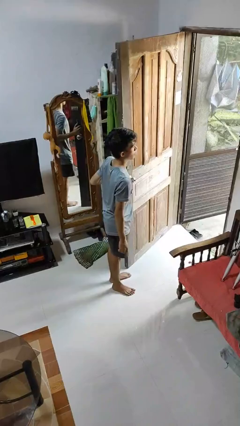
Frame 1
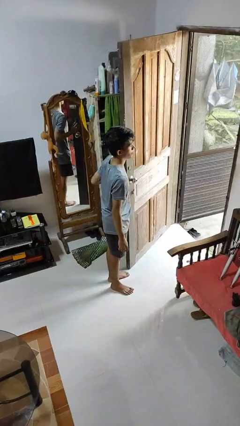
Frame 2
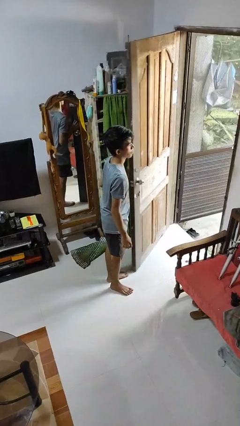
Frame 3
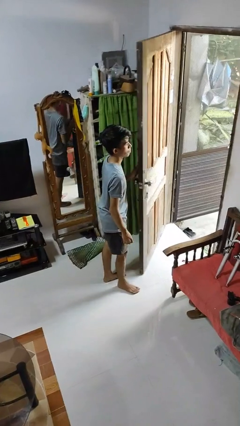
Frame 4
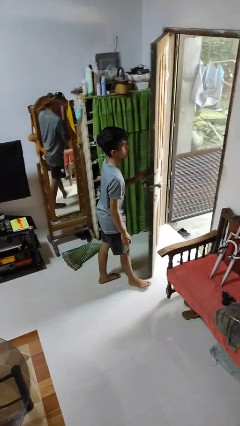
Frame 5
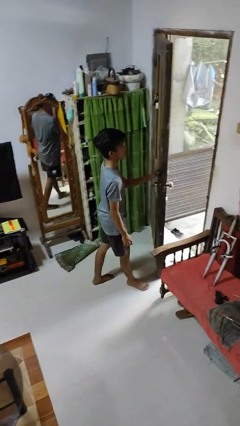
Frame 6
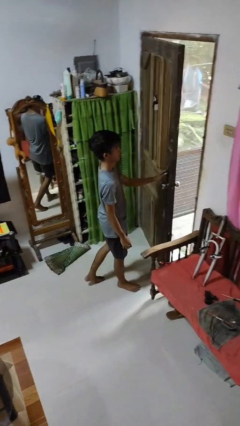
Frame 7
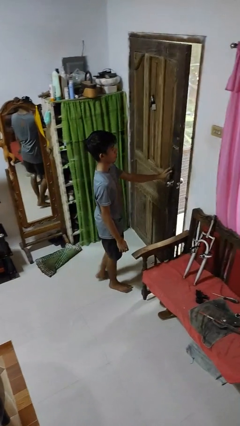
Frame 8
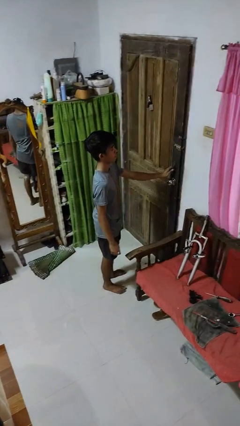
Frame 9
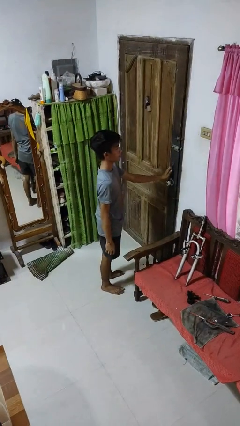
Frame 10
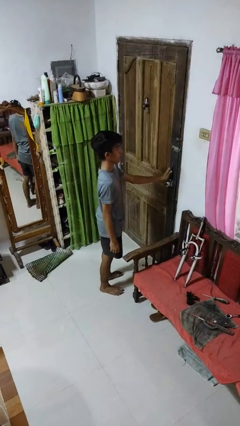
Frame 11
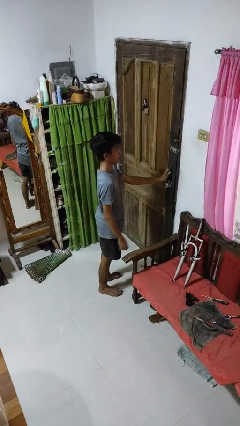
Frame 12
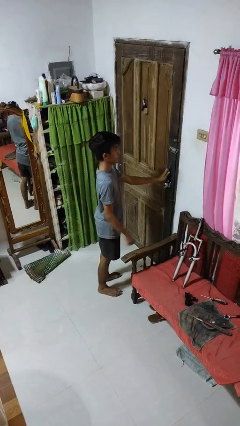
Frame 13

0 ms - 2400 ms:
person closes facility door

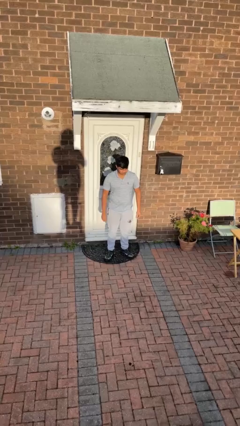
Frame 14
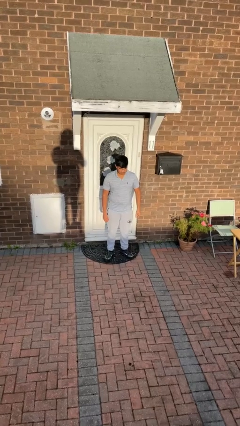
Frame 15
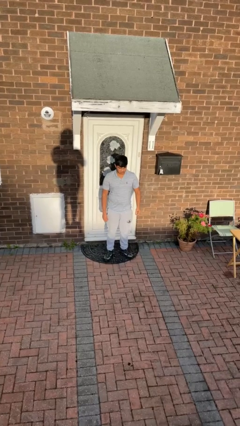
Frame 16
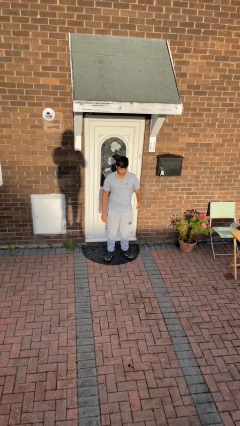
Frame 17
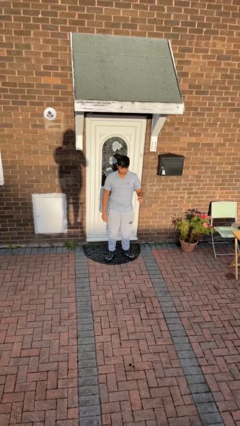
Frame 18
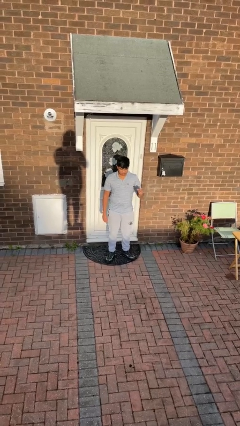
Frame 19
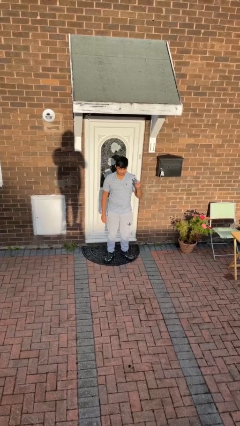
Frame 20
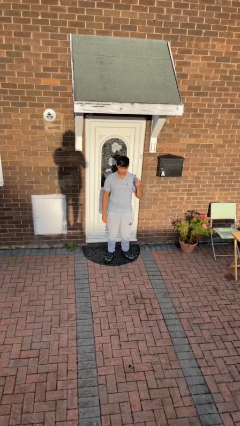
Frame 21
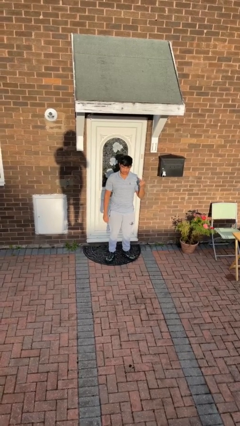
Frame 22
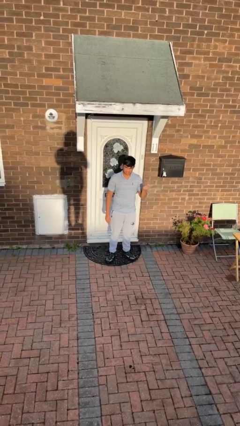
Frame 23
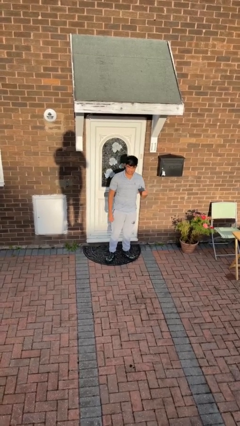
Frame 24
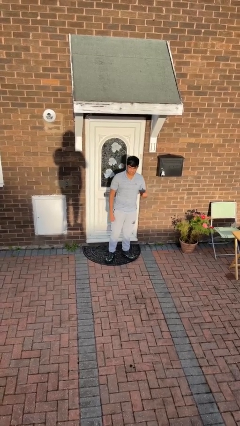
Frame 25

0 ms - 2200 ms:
person snaps fingers

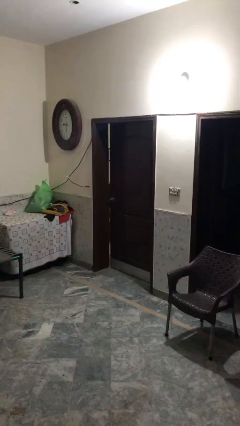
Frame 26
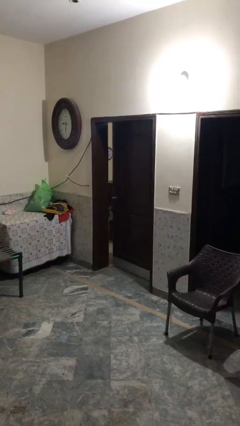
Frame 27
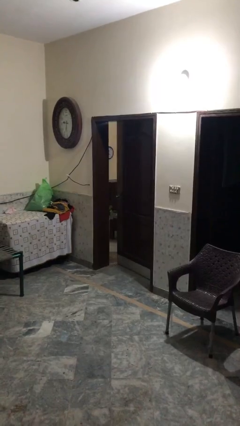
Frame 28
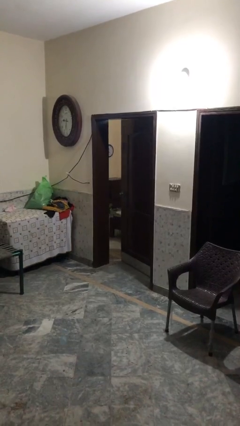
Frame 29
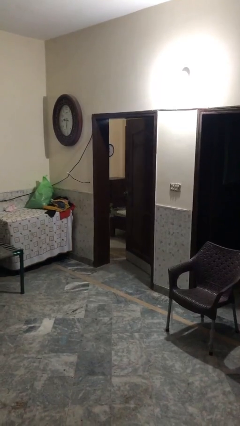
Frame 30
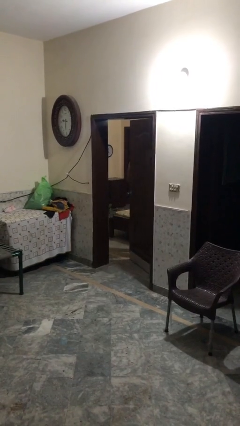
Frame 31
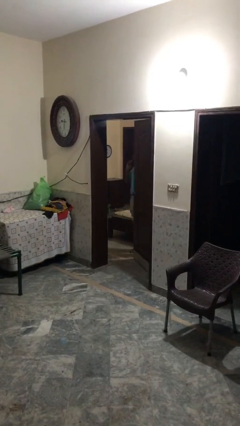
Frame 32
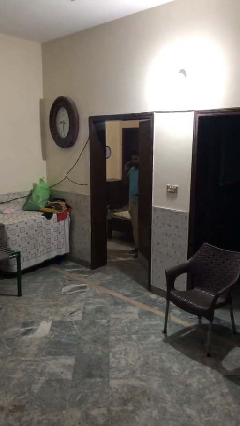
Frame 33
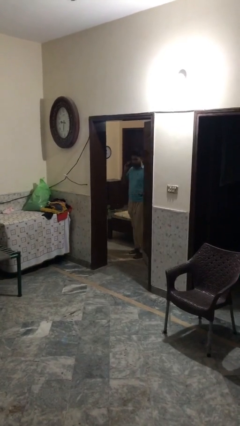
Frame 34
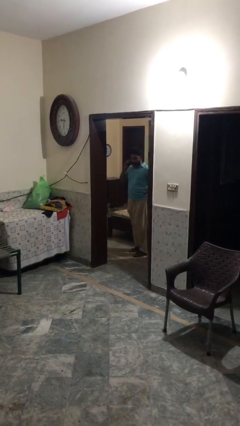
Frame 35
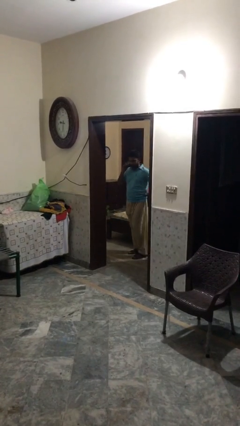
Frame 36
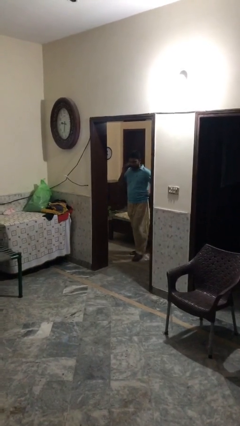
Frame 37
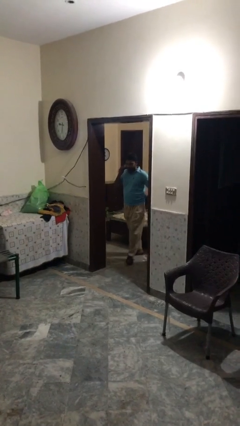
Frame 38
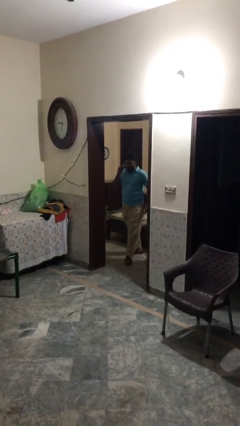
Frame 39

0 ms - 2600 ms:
person opens facility door

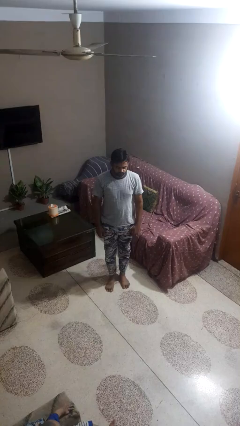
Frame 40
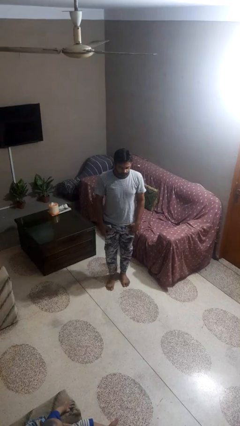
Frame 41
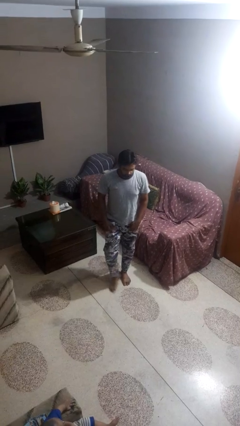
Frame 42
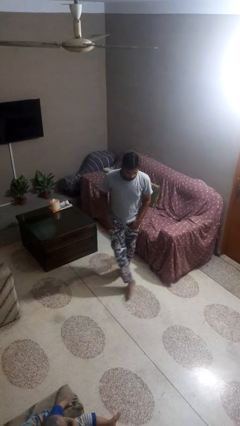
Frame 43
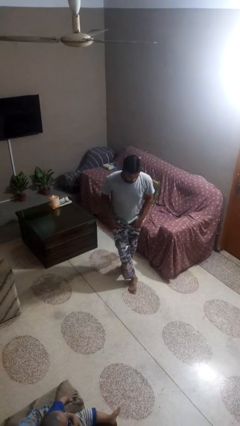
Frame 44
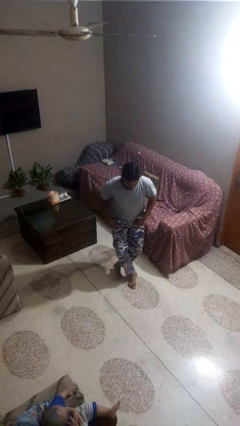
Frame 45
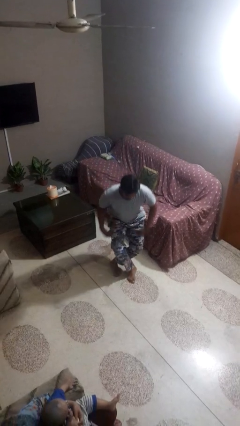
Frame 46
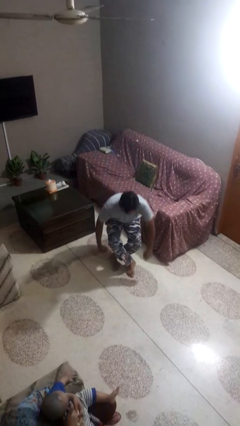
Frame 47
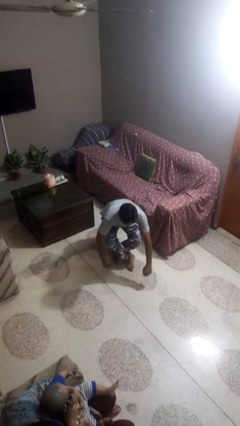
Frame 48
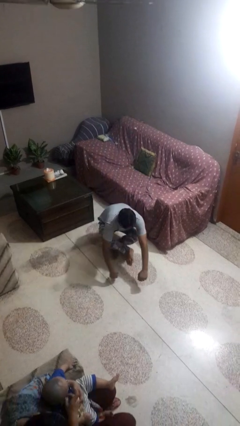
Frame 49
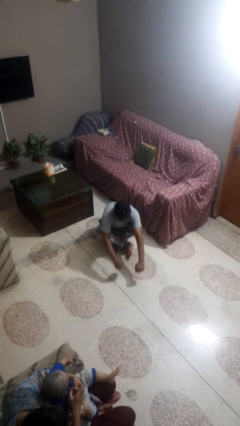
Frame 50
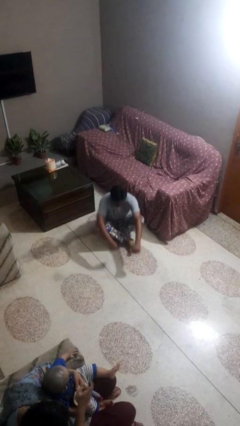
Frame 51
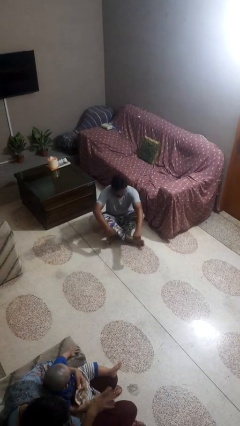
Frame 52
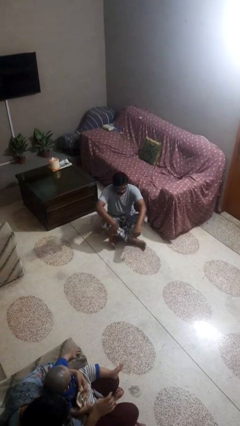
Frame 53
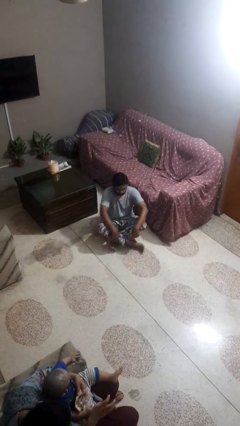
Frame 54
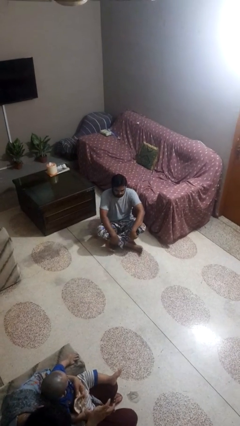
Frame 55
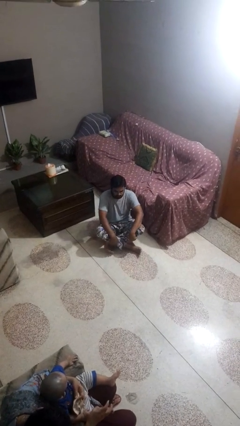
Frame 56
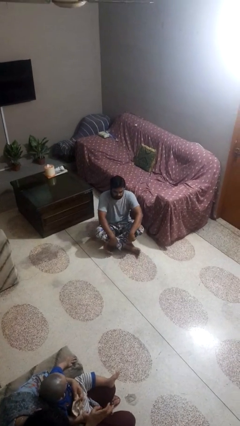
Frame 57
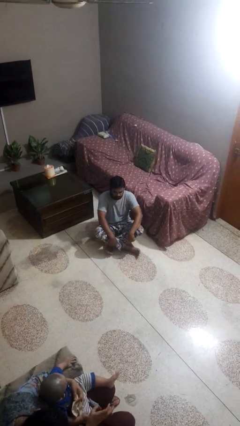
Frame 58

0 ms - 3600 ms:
person sits crisscross

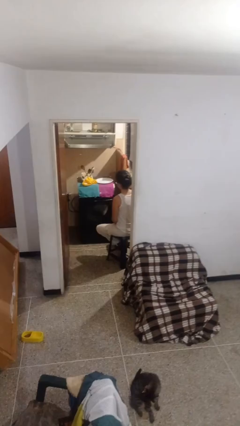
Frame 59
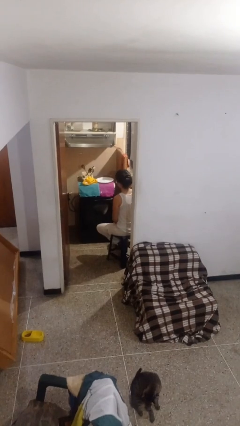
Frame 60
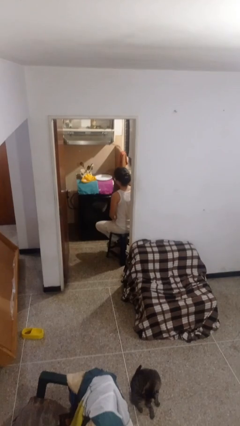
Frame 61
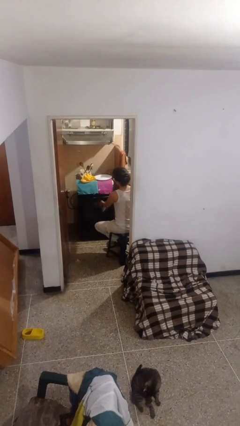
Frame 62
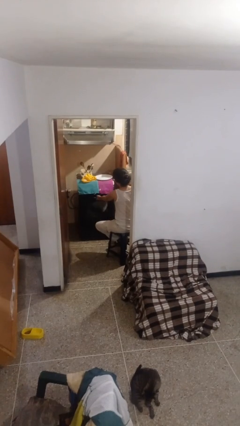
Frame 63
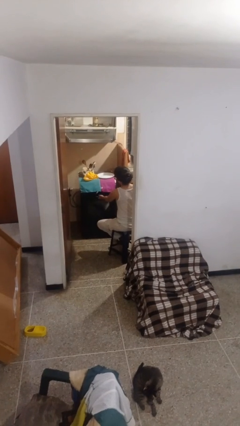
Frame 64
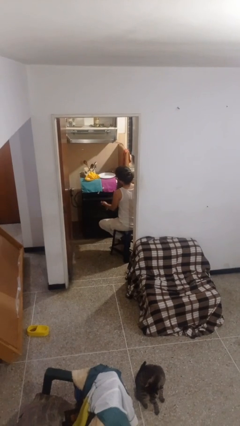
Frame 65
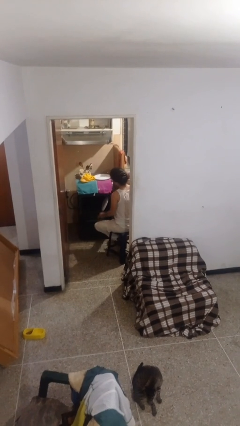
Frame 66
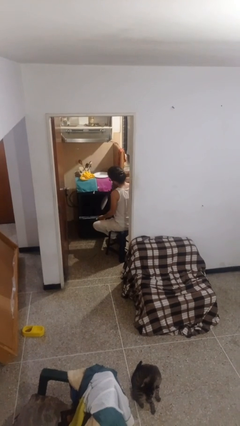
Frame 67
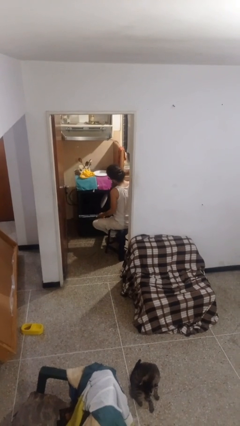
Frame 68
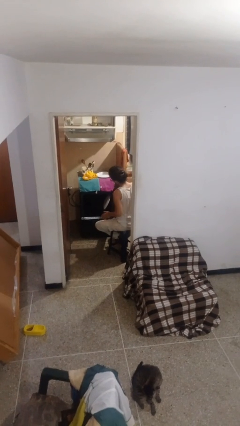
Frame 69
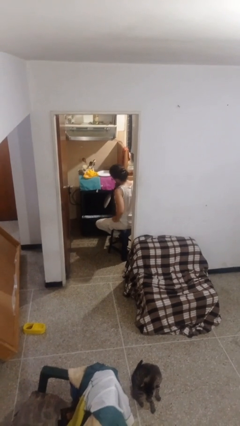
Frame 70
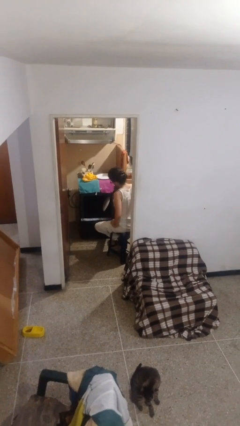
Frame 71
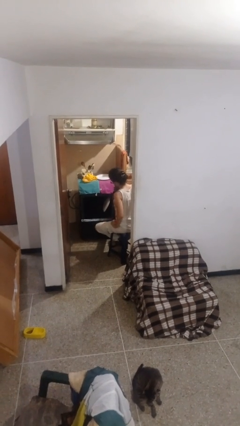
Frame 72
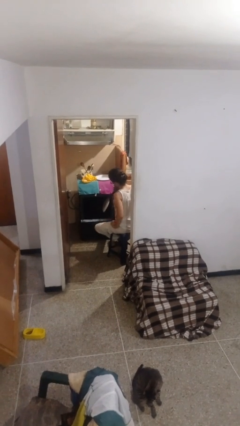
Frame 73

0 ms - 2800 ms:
person opens dishwasher

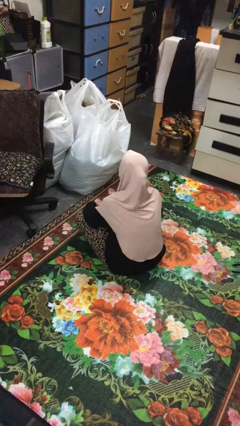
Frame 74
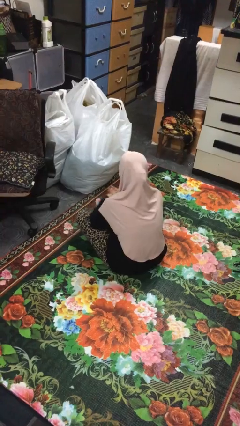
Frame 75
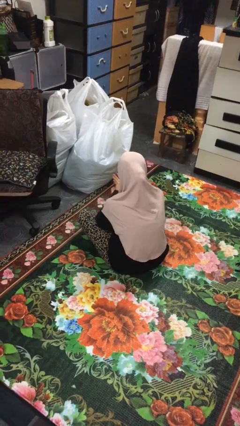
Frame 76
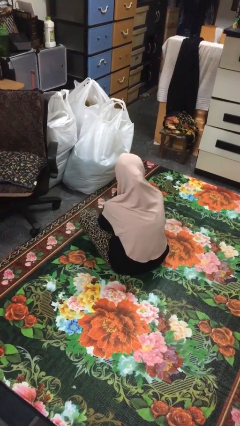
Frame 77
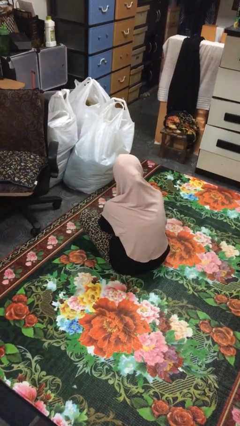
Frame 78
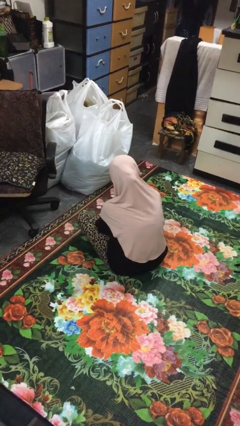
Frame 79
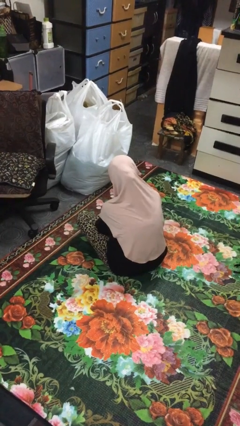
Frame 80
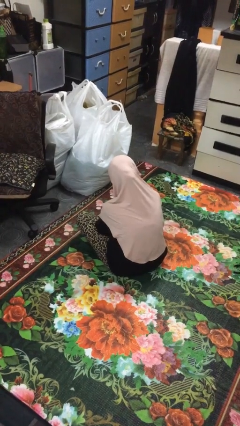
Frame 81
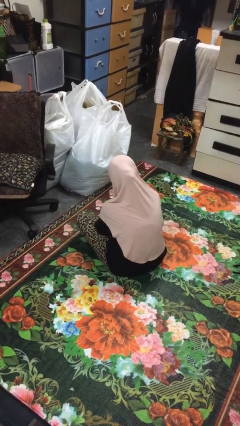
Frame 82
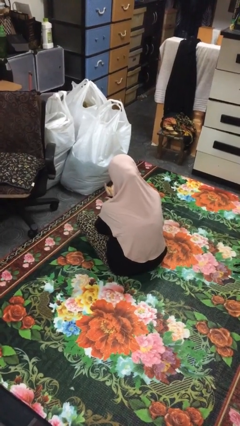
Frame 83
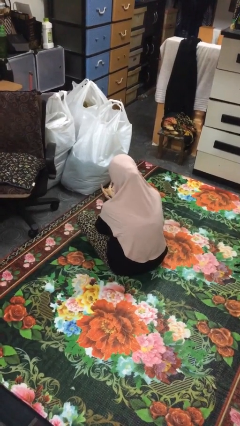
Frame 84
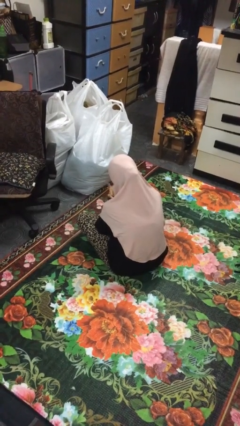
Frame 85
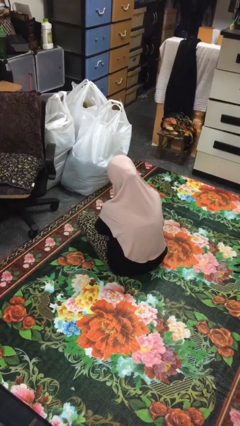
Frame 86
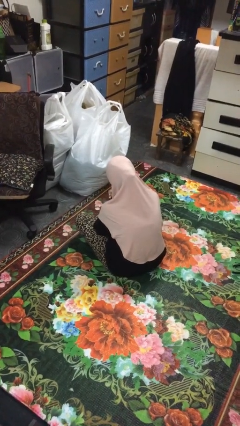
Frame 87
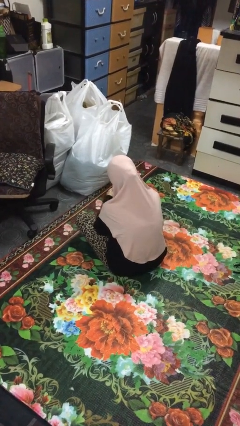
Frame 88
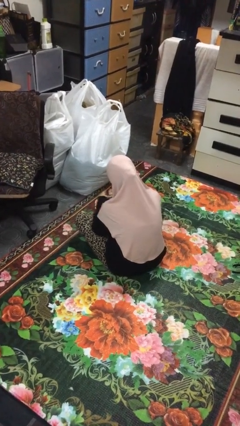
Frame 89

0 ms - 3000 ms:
person looks at hands in lap

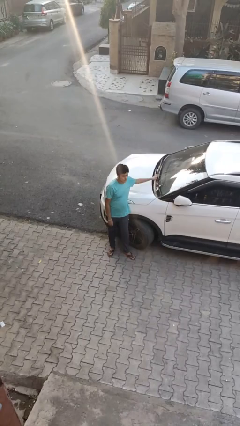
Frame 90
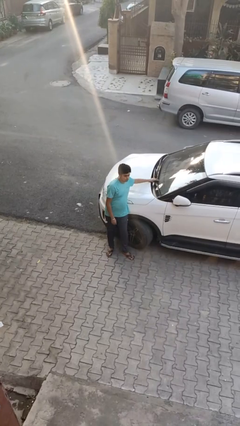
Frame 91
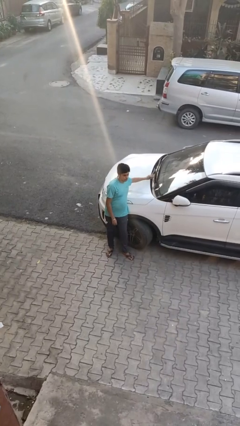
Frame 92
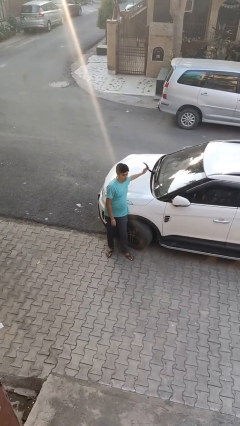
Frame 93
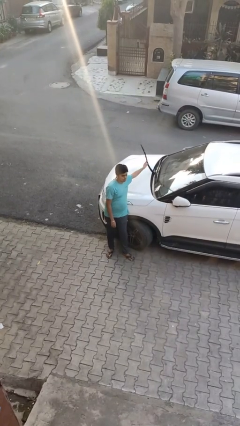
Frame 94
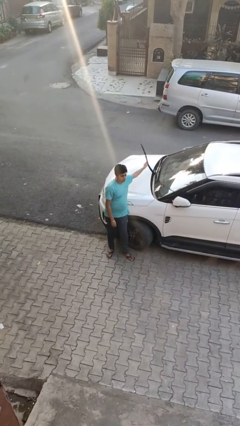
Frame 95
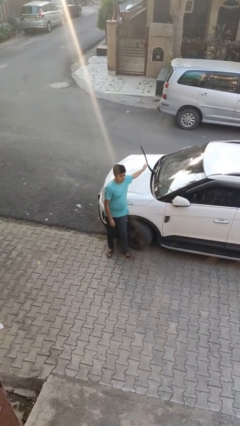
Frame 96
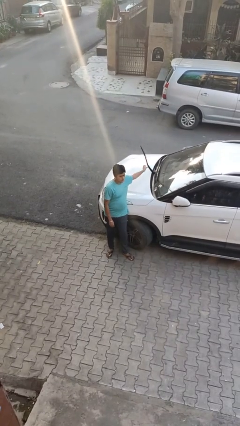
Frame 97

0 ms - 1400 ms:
person flips up car wipers
